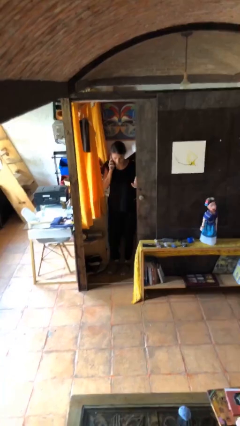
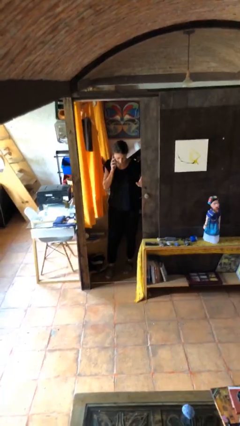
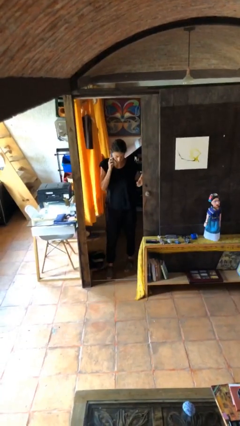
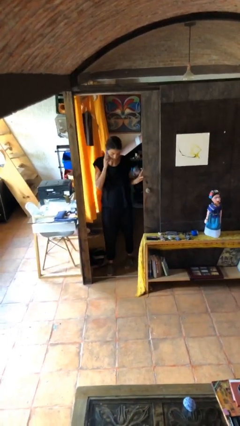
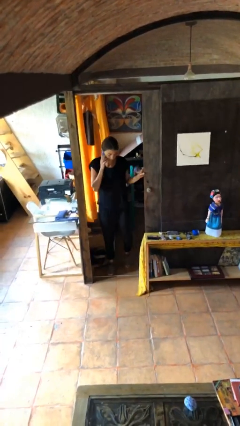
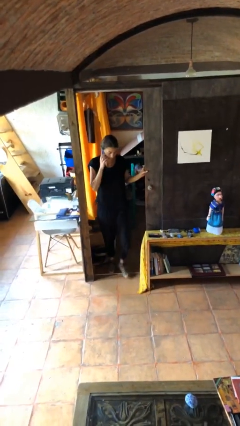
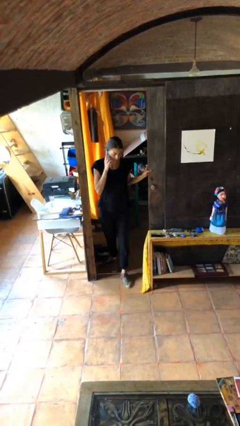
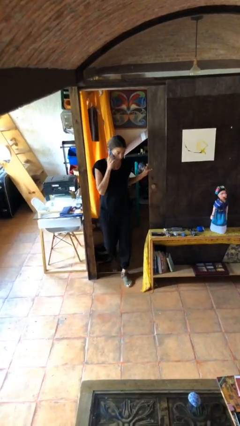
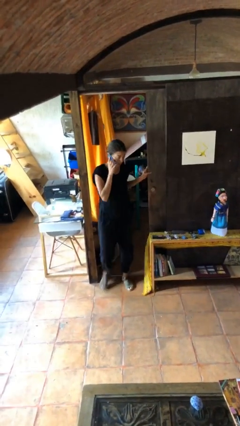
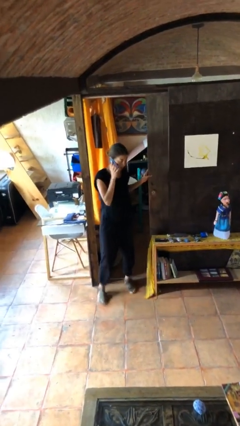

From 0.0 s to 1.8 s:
person enters scene through structure

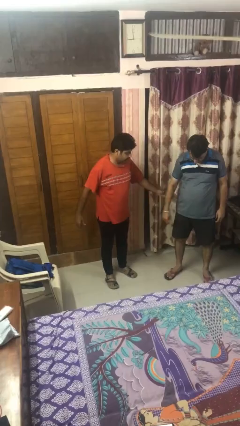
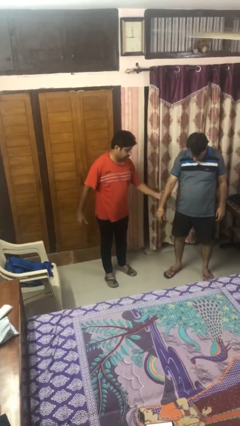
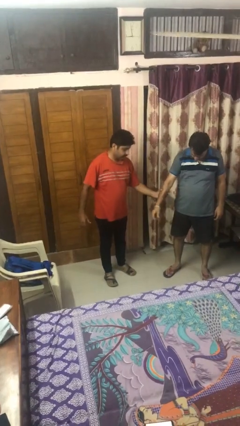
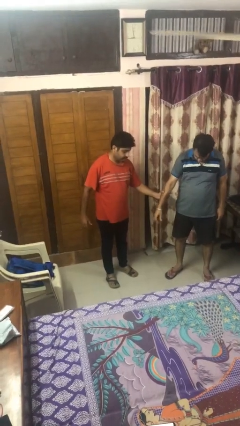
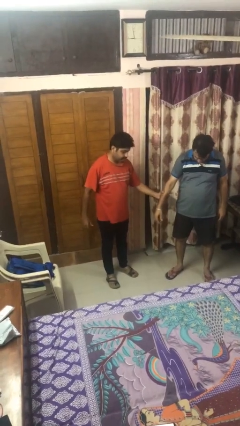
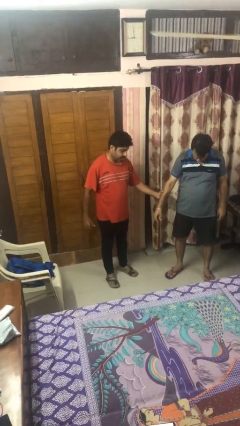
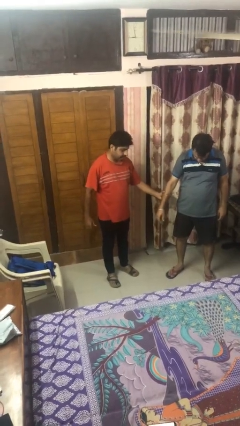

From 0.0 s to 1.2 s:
person grabs person by forearm

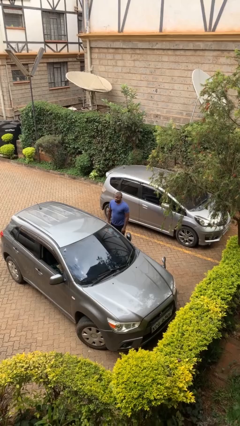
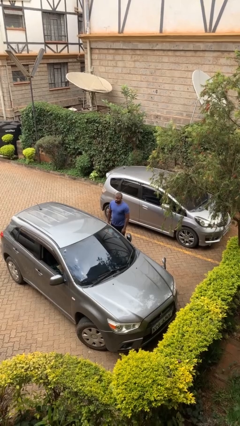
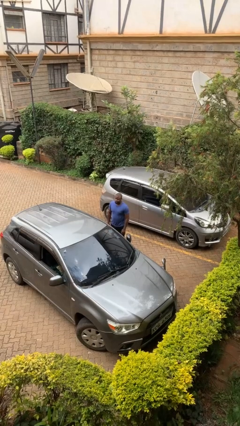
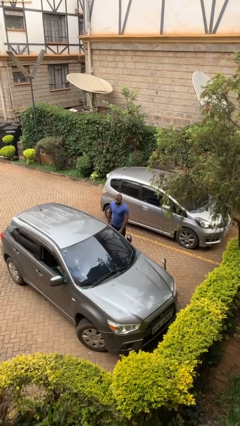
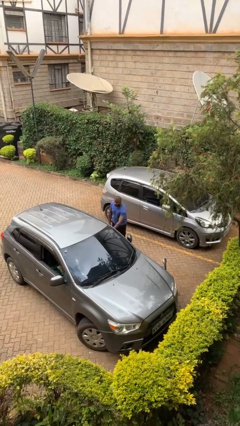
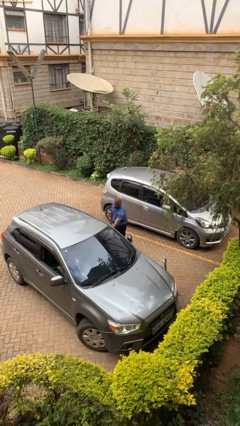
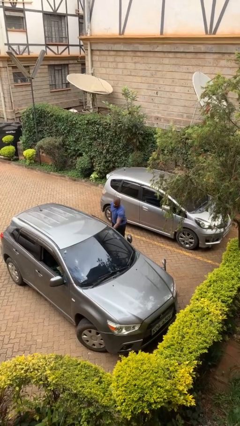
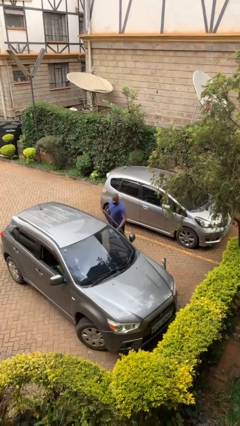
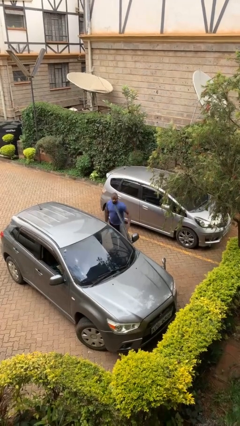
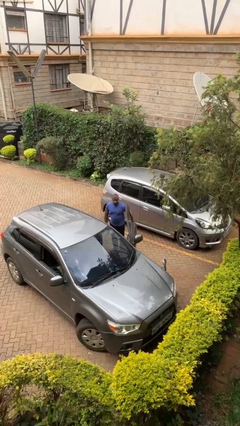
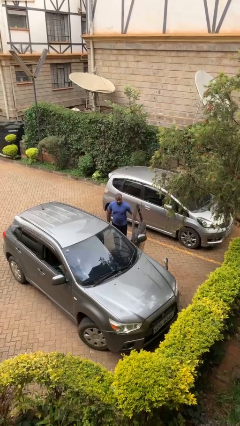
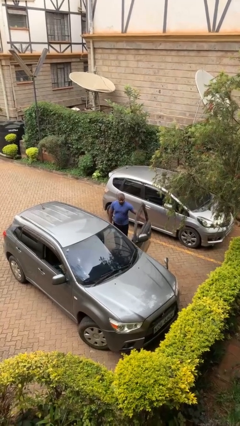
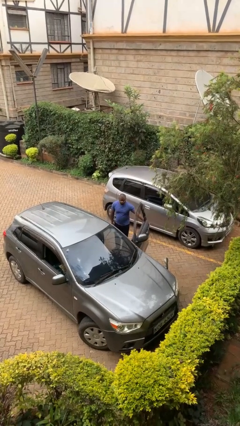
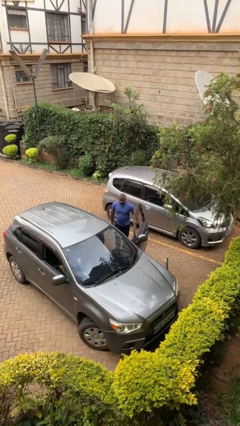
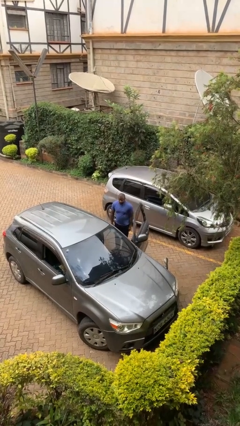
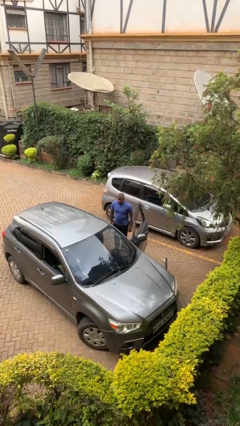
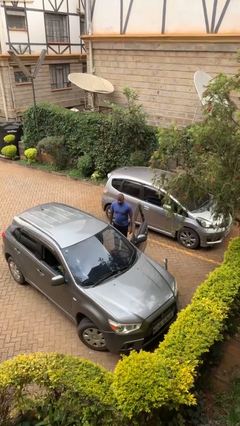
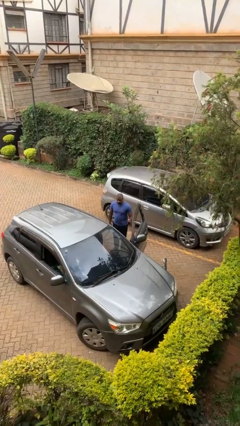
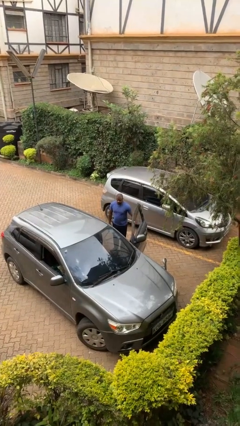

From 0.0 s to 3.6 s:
person opens car door

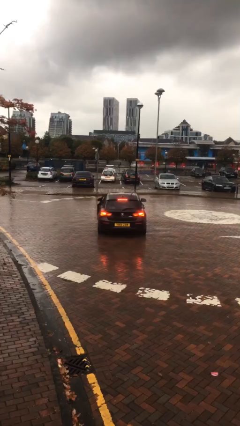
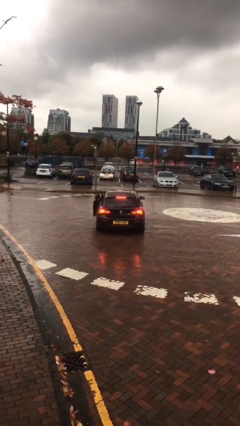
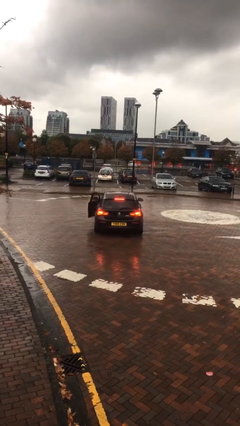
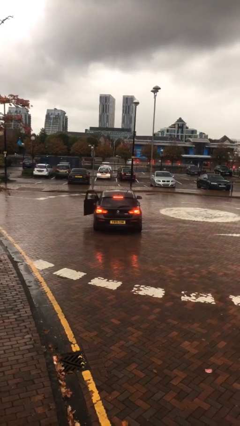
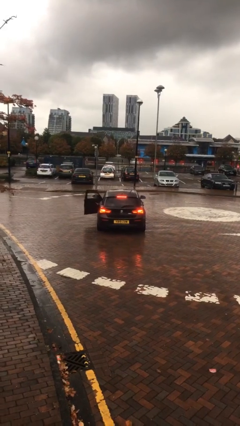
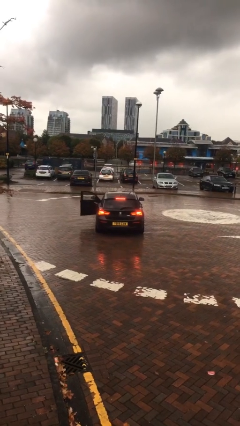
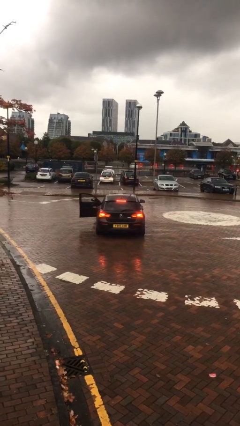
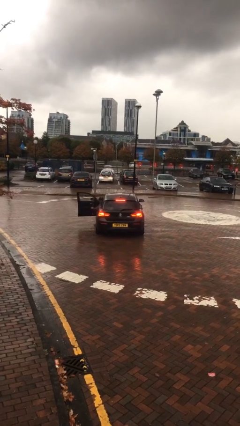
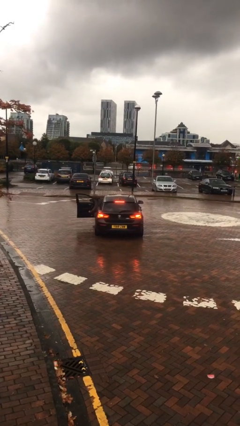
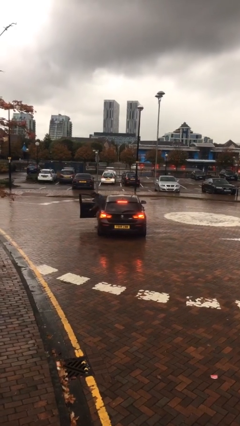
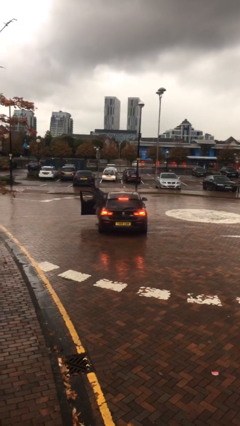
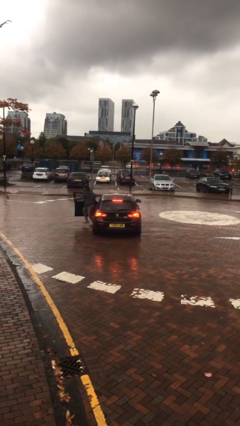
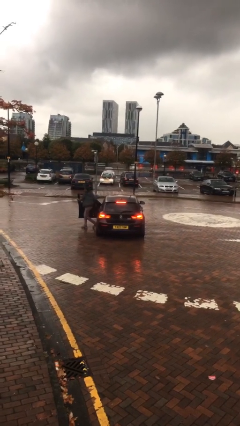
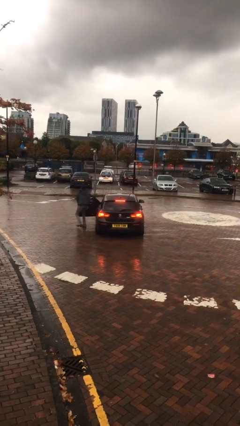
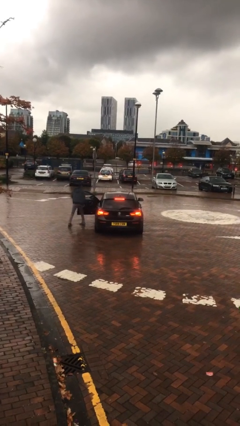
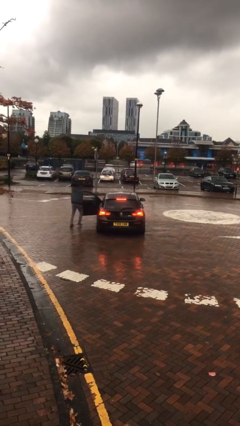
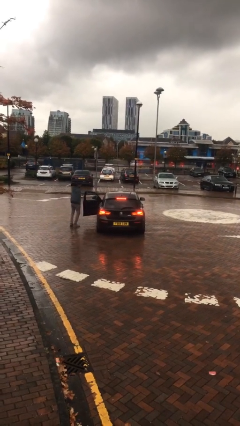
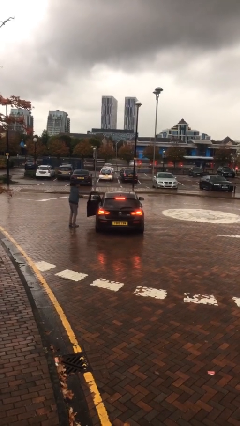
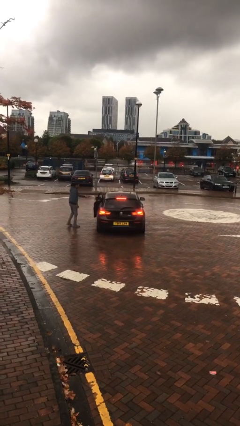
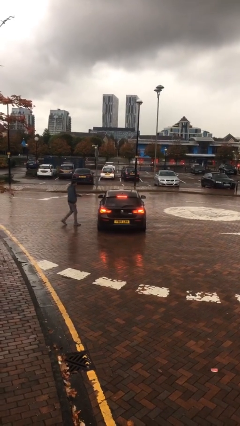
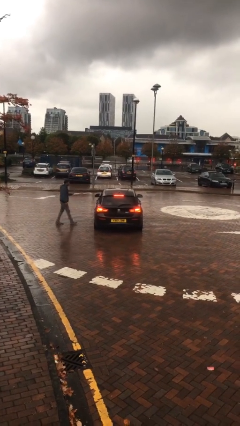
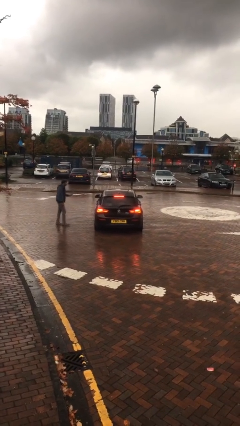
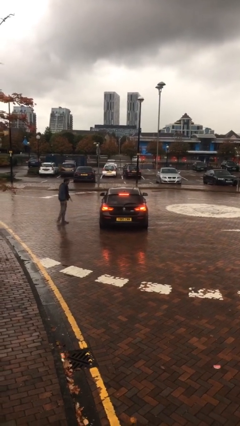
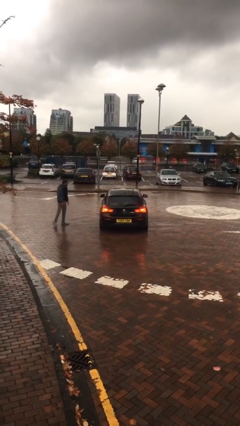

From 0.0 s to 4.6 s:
car drops off person

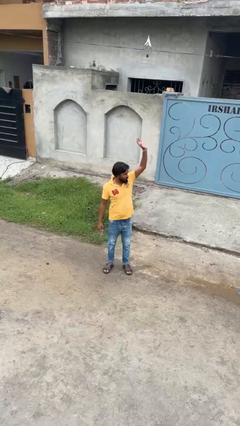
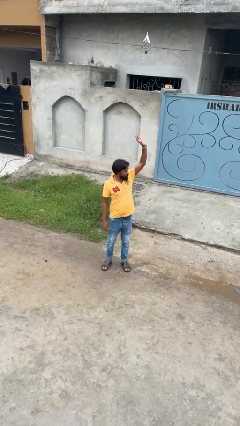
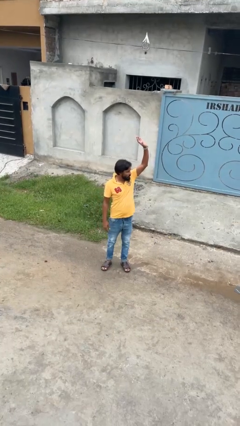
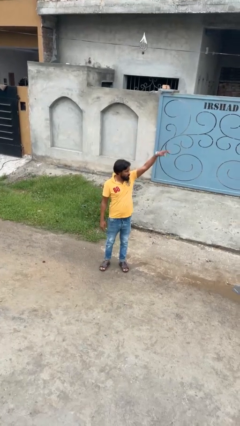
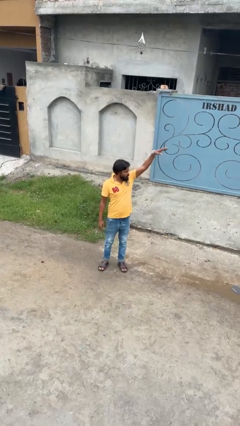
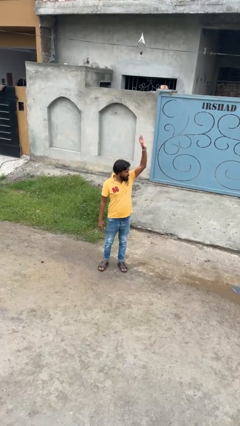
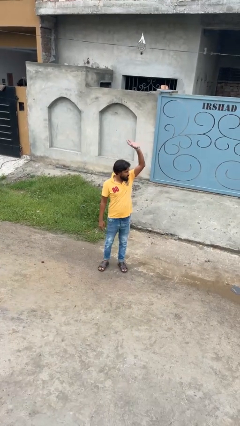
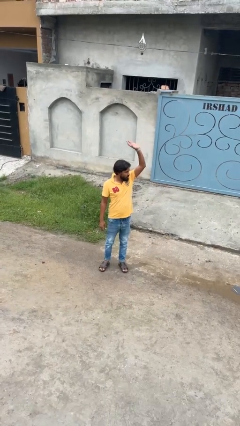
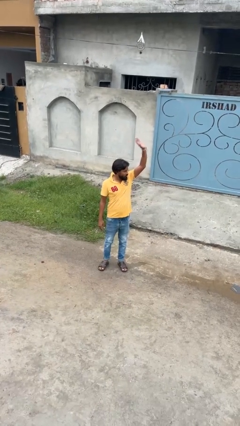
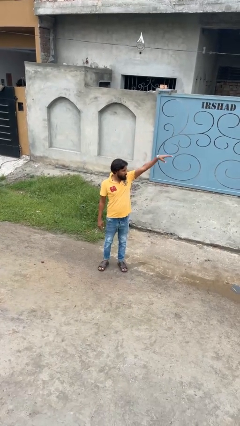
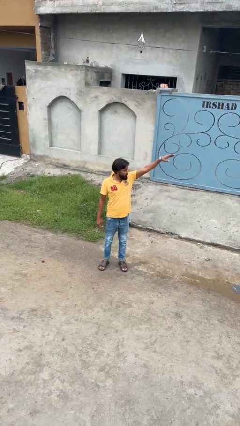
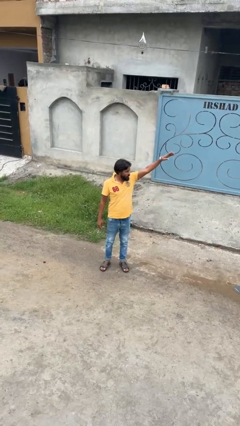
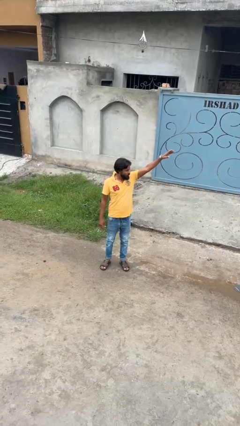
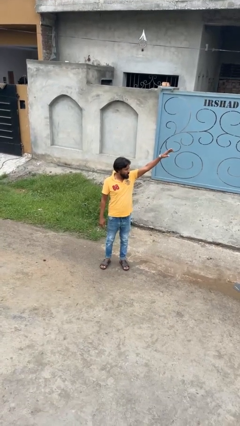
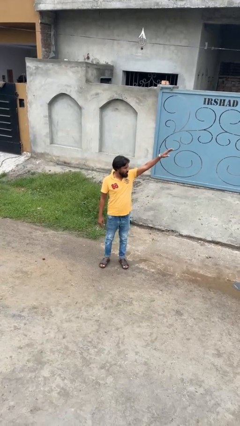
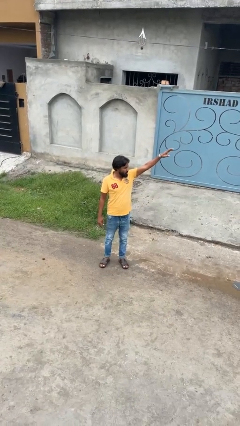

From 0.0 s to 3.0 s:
person gestures come here

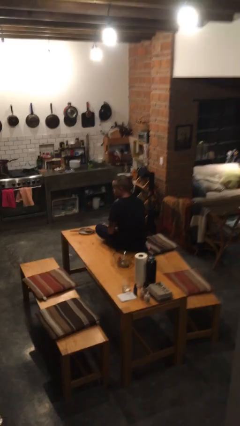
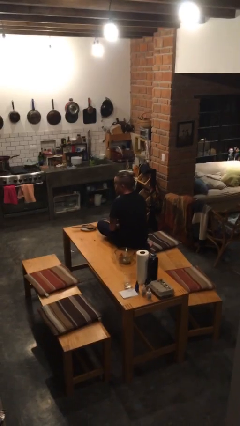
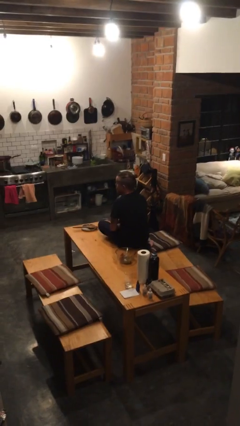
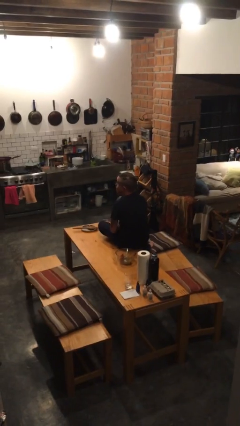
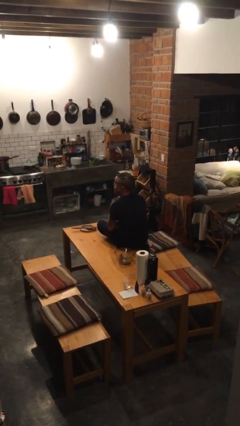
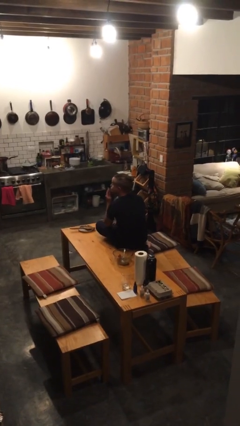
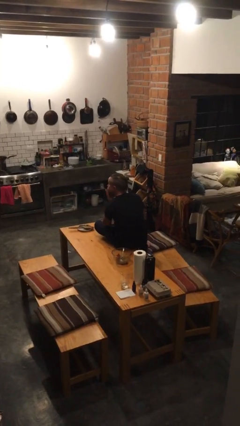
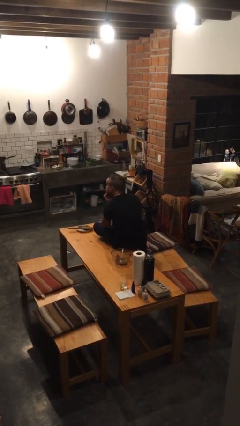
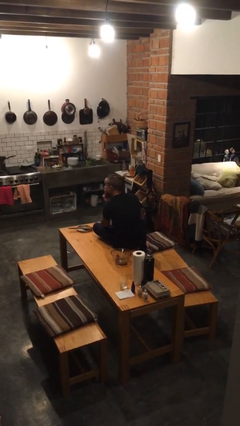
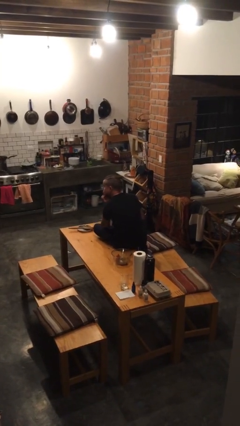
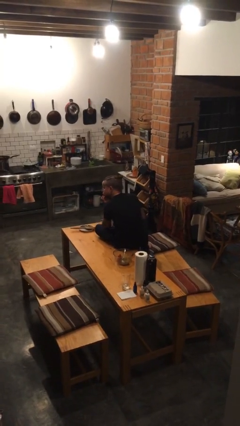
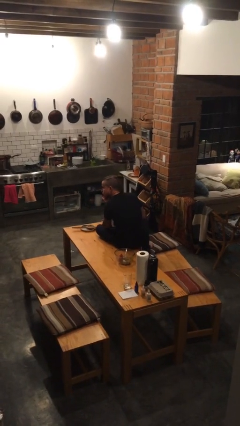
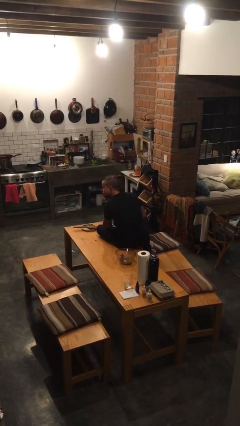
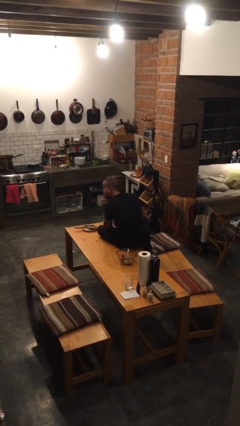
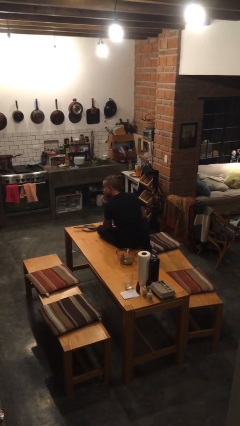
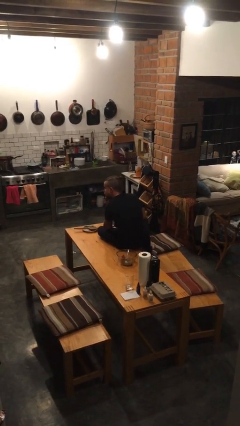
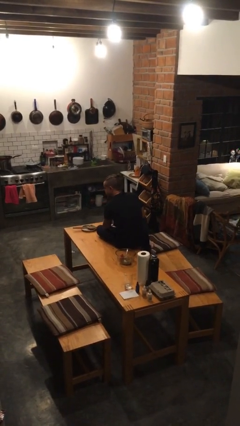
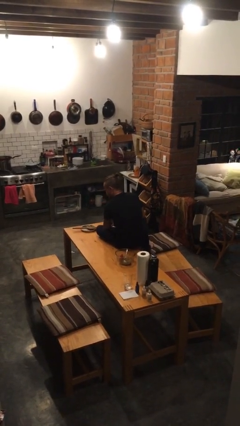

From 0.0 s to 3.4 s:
person strokes chin
